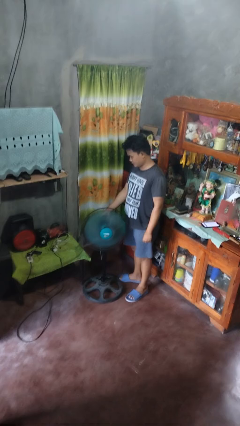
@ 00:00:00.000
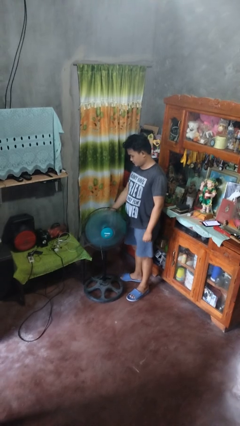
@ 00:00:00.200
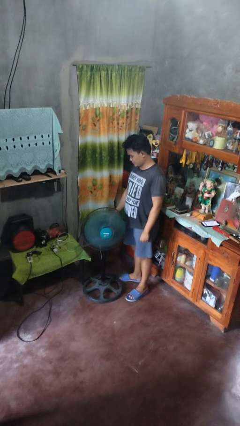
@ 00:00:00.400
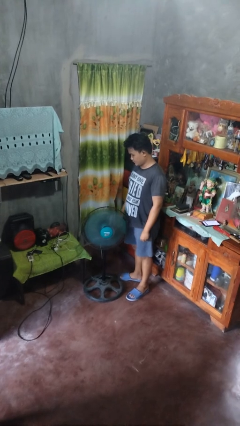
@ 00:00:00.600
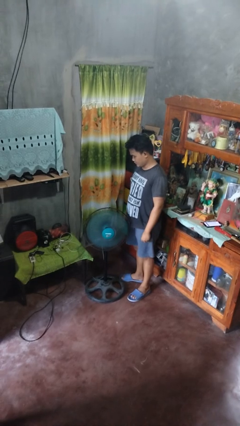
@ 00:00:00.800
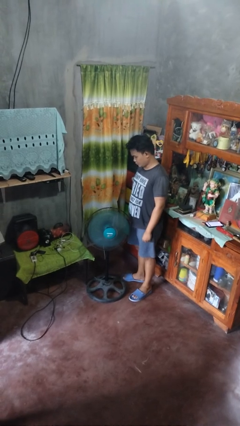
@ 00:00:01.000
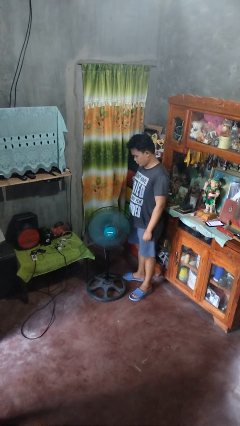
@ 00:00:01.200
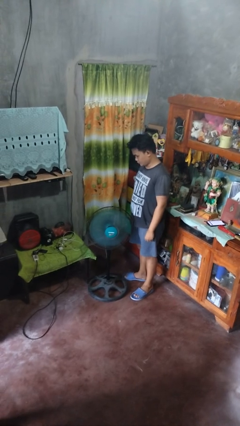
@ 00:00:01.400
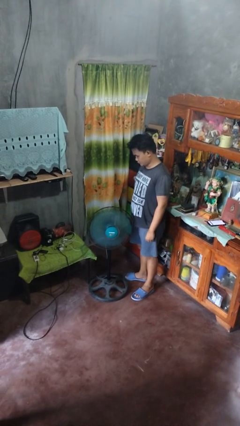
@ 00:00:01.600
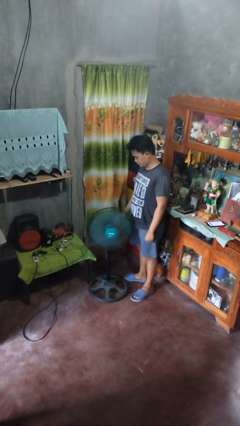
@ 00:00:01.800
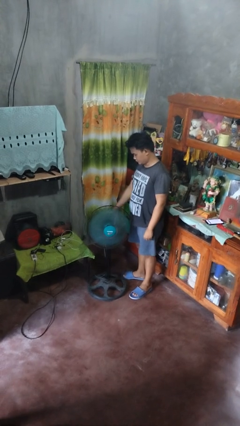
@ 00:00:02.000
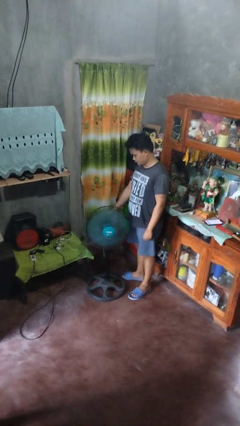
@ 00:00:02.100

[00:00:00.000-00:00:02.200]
person turns off fan

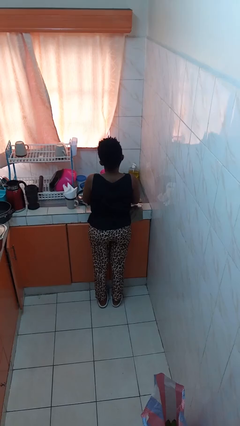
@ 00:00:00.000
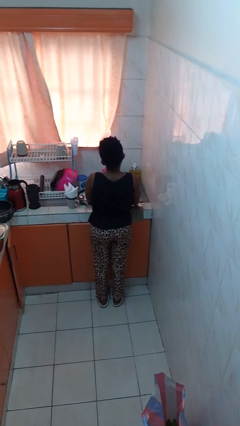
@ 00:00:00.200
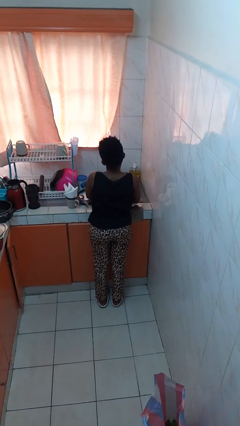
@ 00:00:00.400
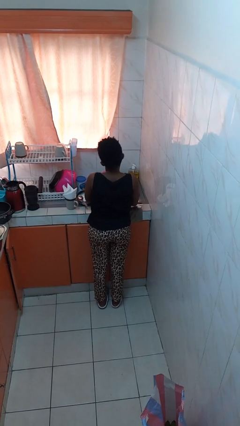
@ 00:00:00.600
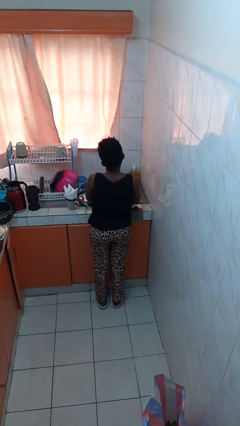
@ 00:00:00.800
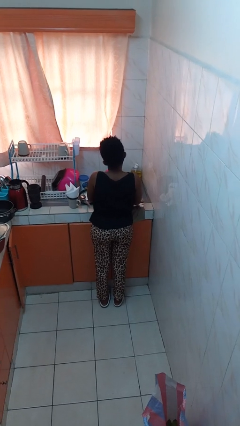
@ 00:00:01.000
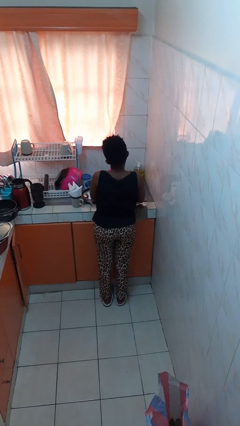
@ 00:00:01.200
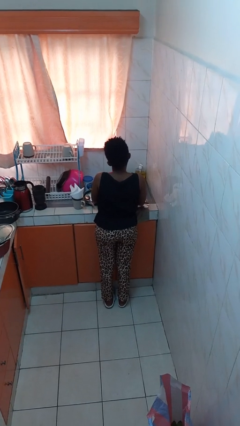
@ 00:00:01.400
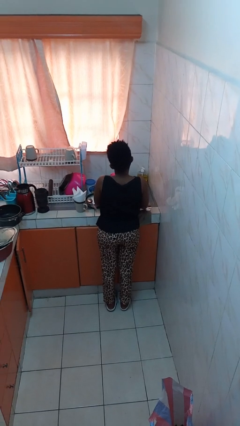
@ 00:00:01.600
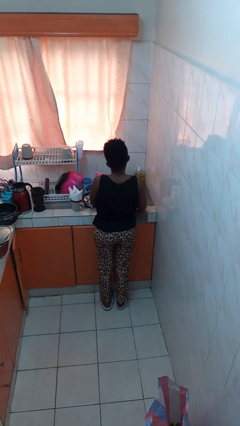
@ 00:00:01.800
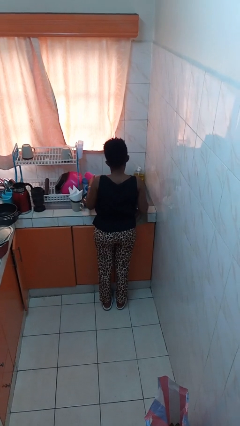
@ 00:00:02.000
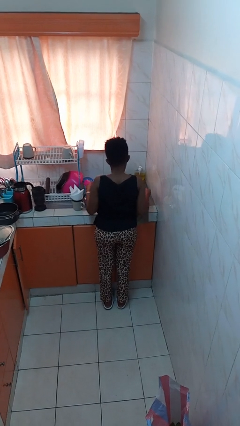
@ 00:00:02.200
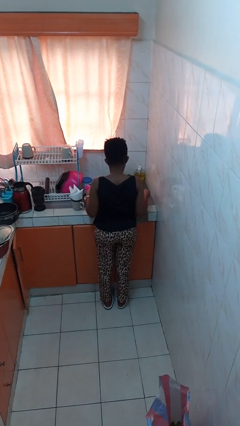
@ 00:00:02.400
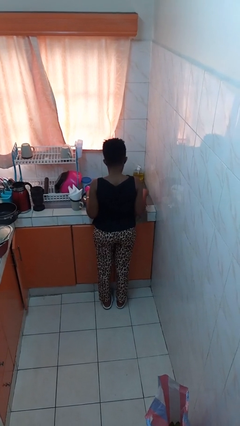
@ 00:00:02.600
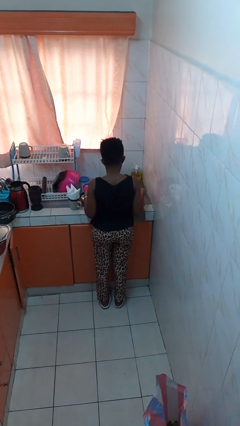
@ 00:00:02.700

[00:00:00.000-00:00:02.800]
person washes dish

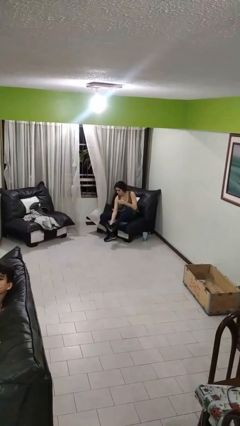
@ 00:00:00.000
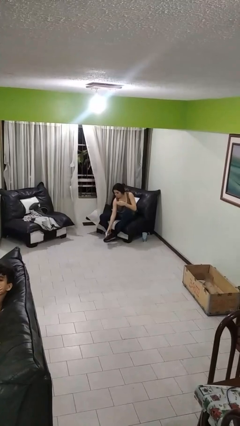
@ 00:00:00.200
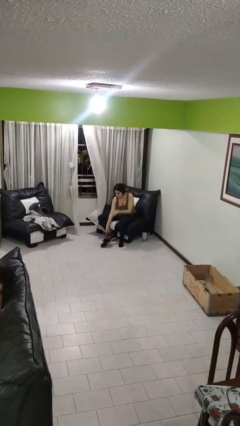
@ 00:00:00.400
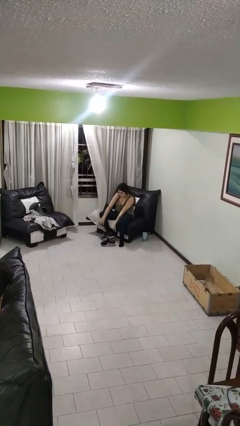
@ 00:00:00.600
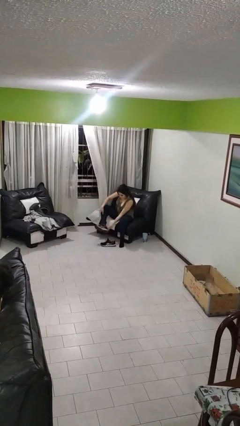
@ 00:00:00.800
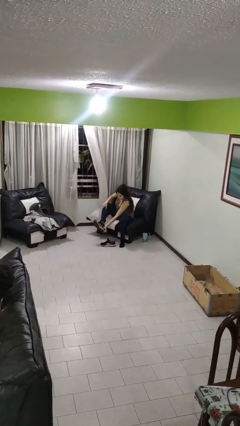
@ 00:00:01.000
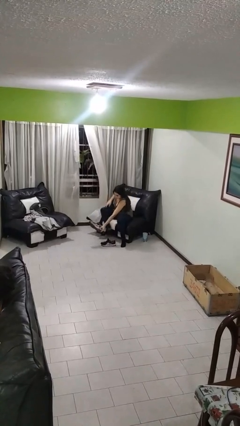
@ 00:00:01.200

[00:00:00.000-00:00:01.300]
person takes off shoes

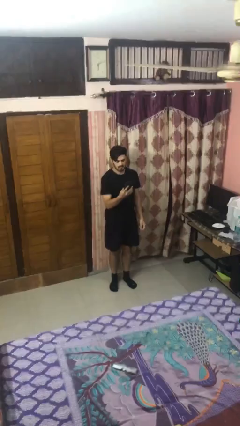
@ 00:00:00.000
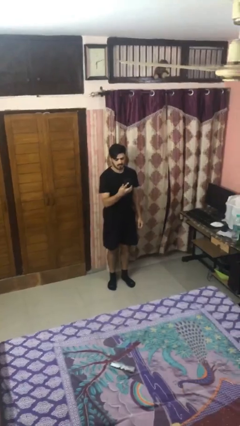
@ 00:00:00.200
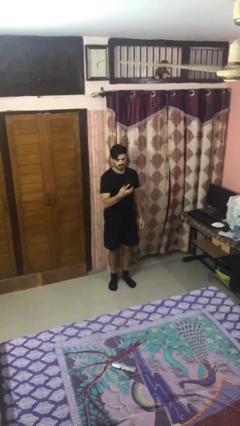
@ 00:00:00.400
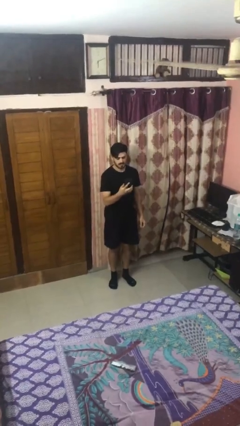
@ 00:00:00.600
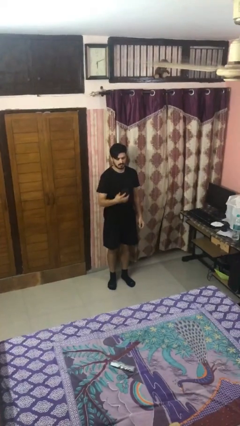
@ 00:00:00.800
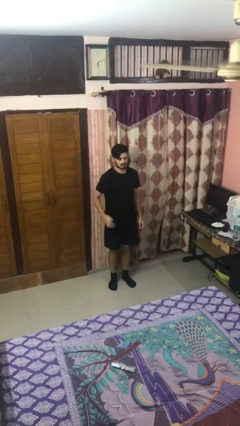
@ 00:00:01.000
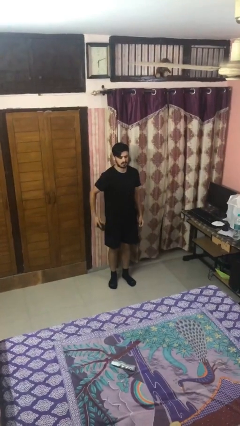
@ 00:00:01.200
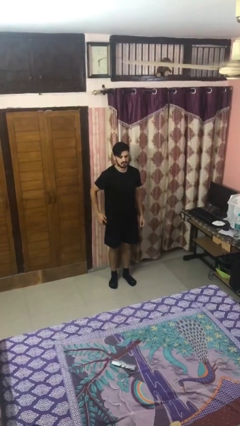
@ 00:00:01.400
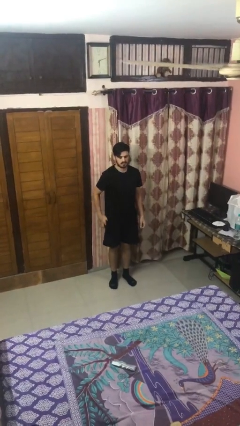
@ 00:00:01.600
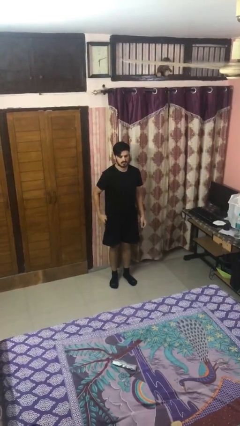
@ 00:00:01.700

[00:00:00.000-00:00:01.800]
person puts phone into pocket

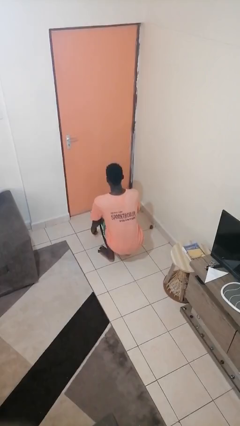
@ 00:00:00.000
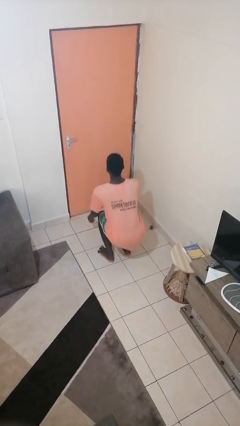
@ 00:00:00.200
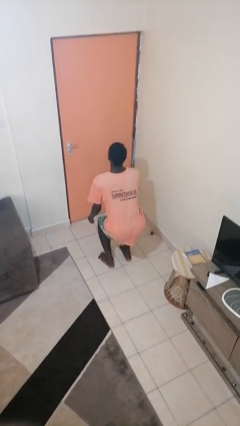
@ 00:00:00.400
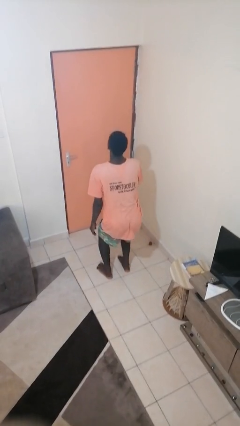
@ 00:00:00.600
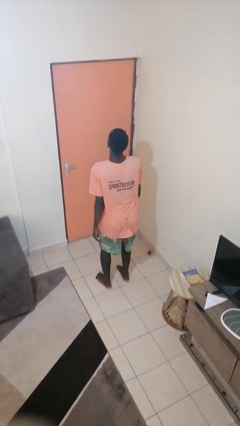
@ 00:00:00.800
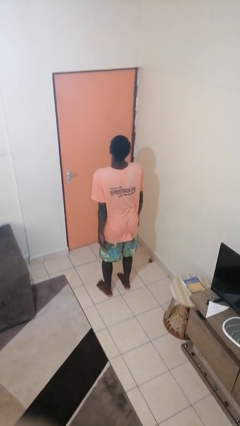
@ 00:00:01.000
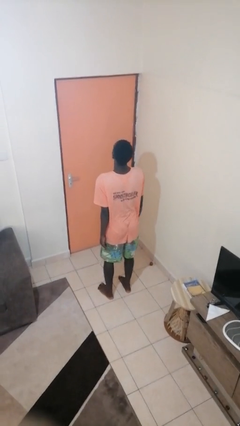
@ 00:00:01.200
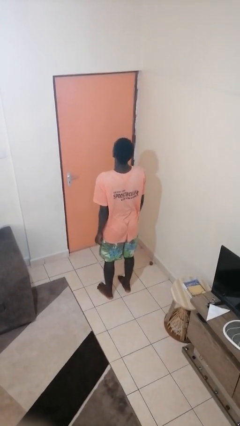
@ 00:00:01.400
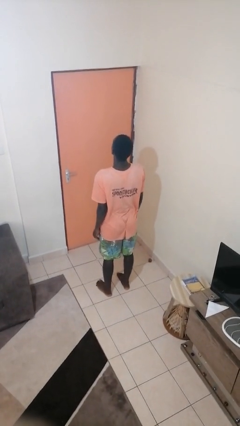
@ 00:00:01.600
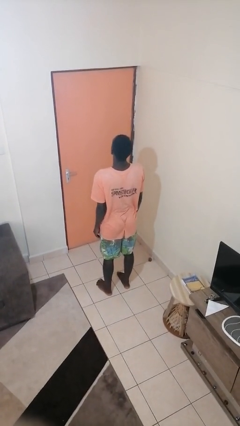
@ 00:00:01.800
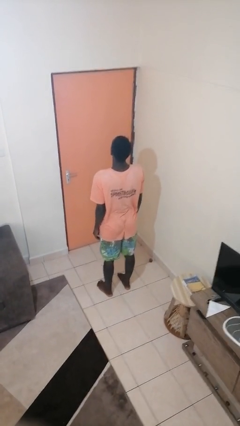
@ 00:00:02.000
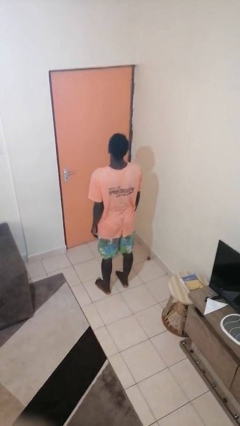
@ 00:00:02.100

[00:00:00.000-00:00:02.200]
person stands up

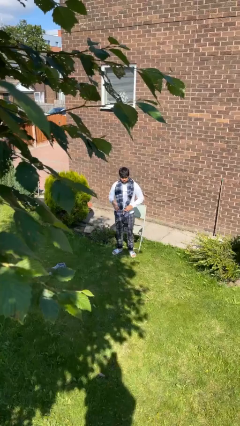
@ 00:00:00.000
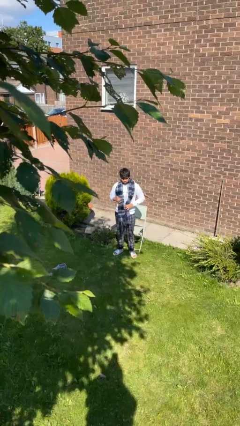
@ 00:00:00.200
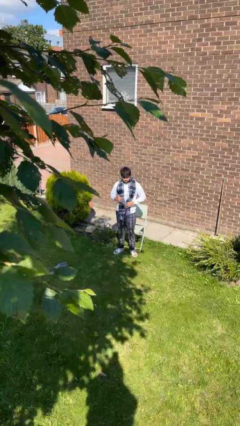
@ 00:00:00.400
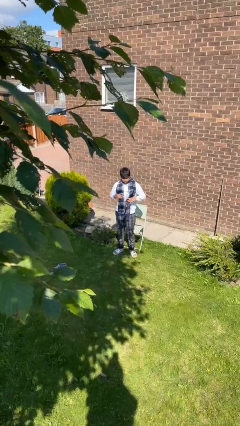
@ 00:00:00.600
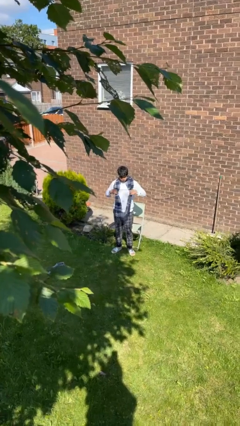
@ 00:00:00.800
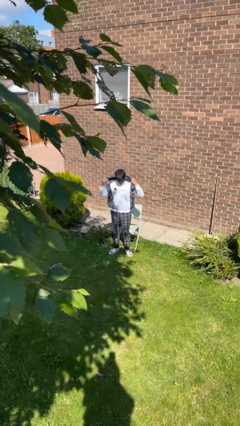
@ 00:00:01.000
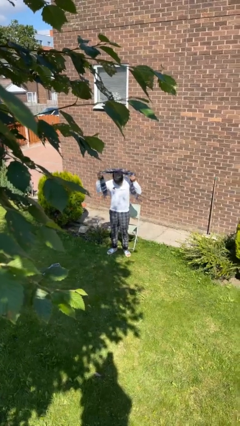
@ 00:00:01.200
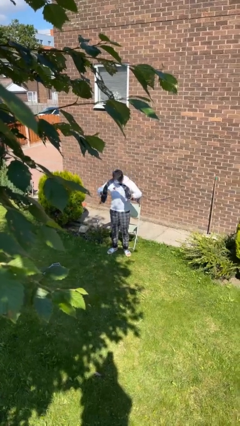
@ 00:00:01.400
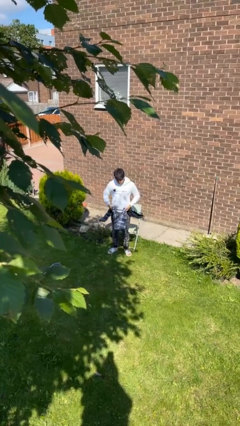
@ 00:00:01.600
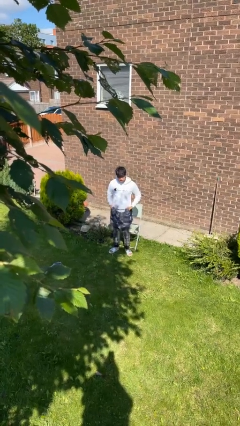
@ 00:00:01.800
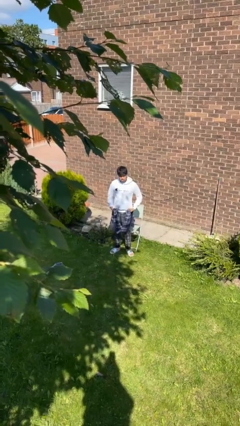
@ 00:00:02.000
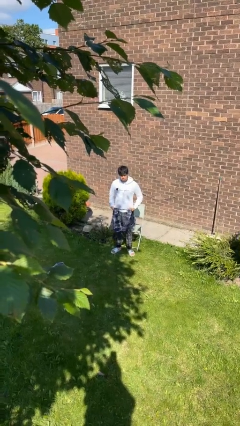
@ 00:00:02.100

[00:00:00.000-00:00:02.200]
person takes off scarf

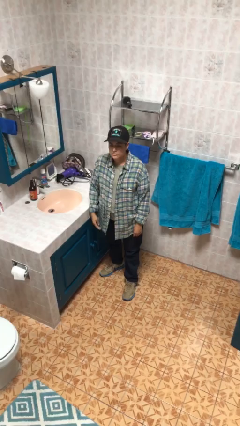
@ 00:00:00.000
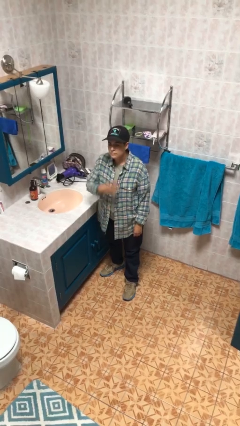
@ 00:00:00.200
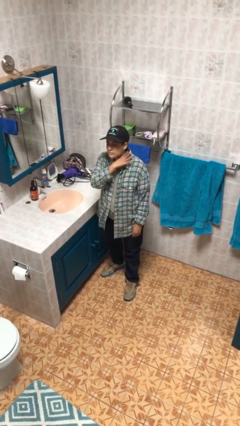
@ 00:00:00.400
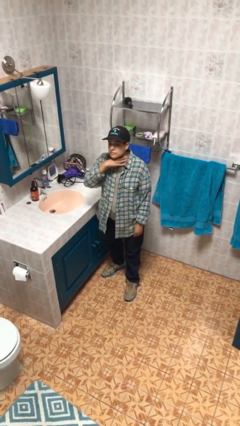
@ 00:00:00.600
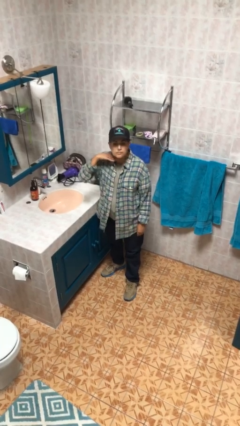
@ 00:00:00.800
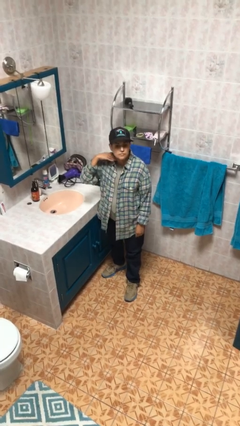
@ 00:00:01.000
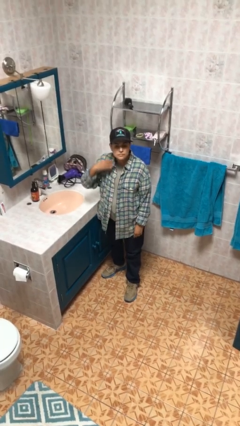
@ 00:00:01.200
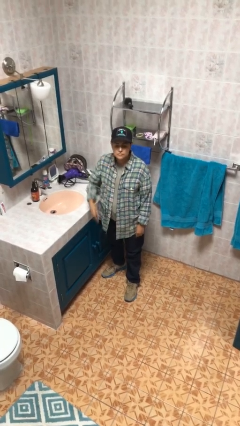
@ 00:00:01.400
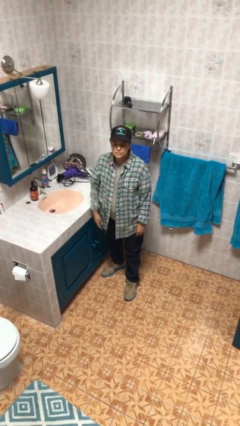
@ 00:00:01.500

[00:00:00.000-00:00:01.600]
person gestures cut

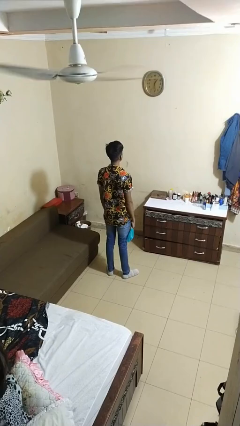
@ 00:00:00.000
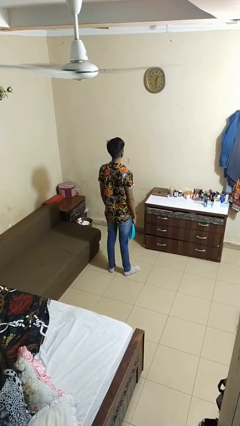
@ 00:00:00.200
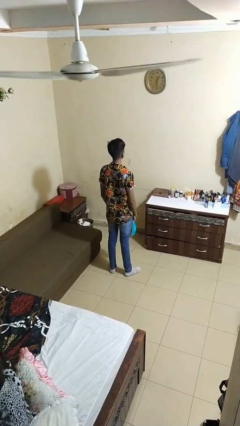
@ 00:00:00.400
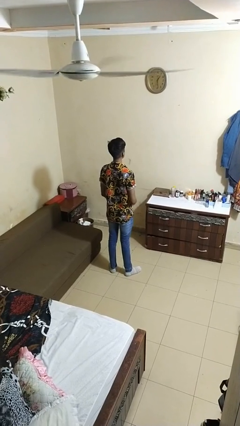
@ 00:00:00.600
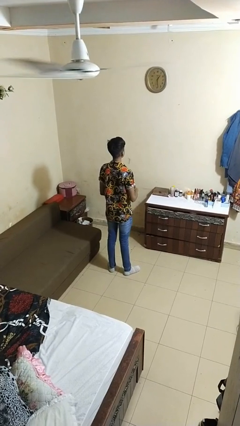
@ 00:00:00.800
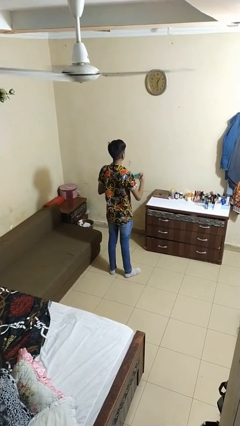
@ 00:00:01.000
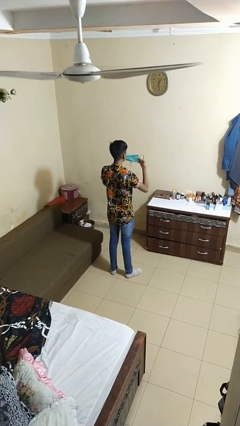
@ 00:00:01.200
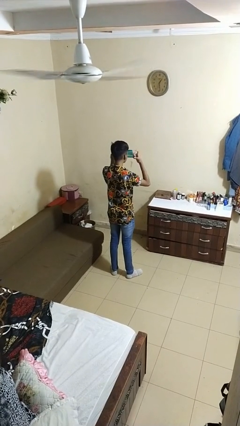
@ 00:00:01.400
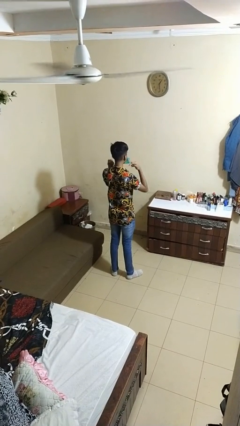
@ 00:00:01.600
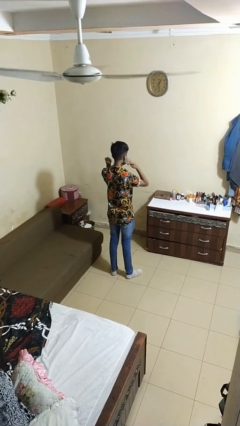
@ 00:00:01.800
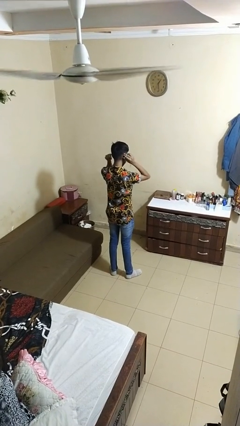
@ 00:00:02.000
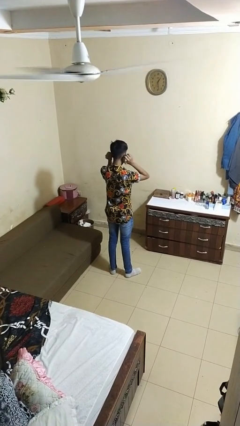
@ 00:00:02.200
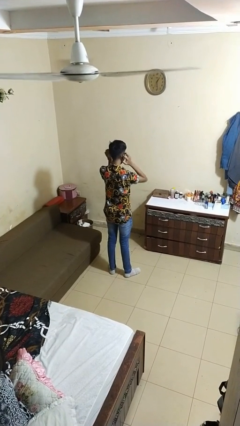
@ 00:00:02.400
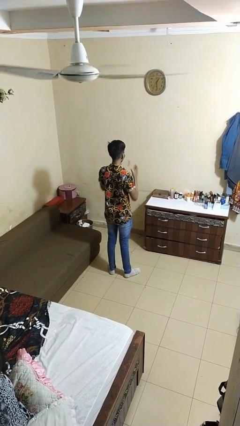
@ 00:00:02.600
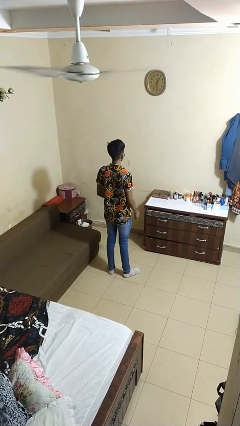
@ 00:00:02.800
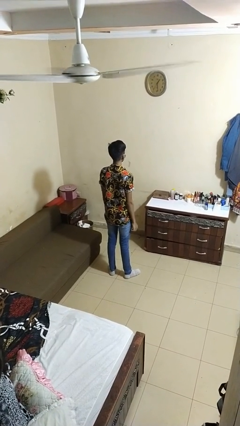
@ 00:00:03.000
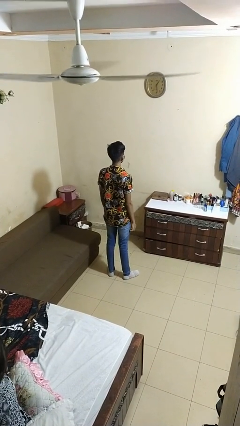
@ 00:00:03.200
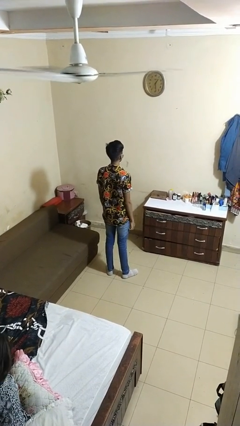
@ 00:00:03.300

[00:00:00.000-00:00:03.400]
person puts on facemask
